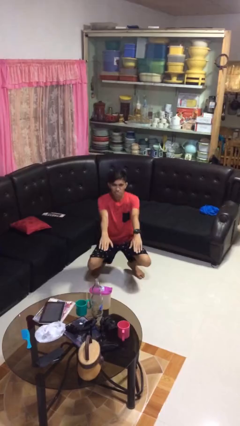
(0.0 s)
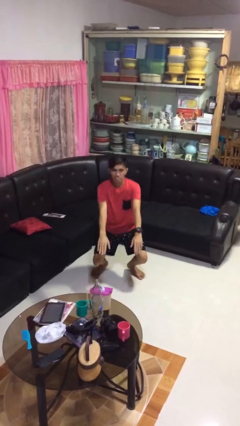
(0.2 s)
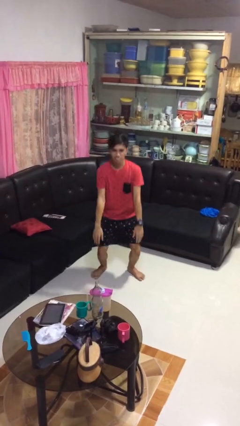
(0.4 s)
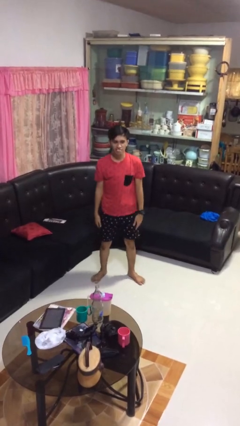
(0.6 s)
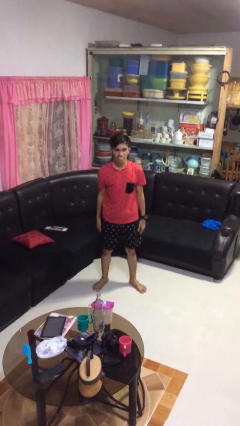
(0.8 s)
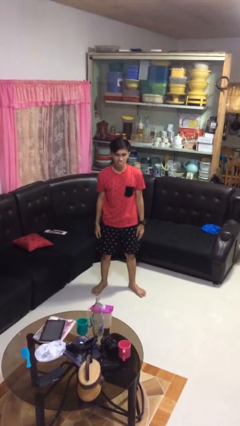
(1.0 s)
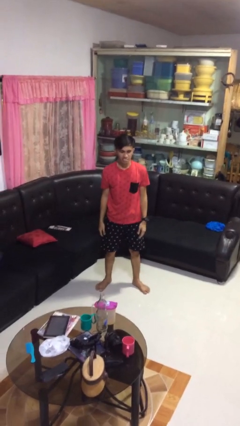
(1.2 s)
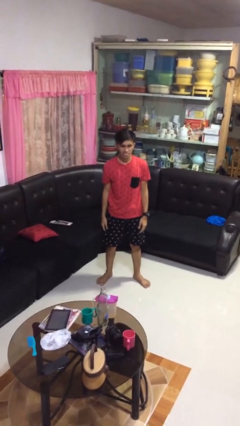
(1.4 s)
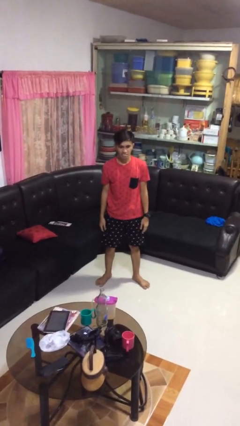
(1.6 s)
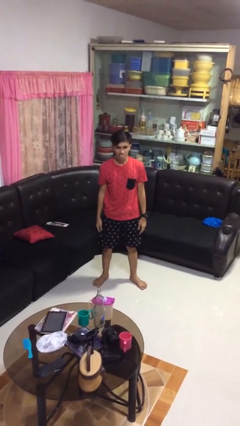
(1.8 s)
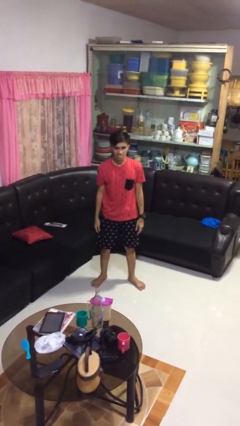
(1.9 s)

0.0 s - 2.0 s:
person stands up

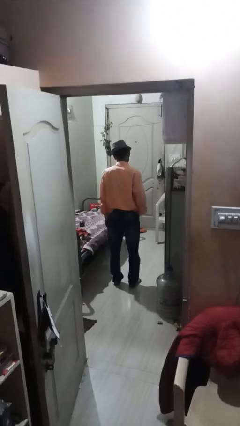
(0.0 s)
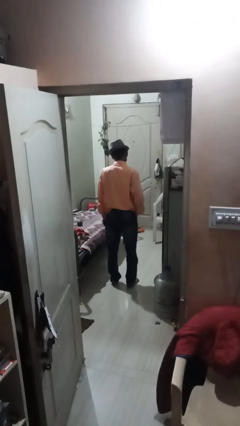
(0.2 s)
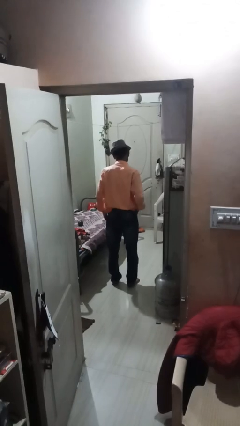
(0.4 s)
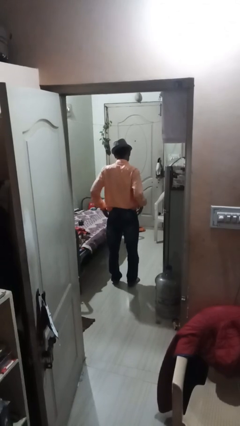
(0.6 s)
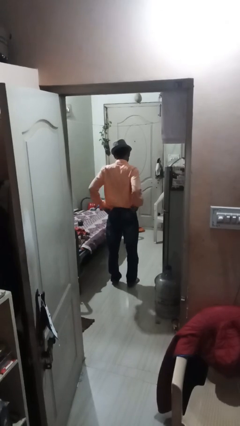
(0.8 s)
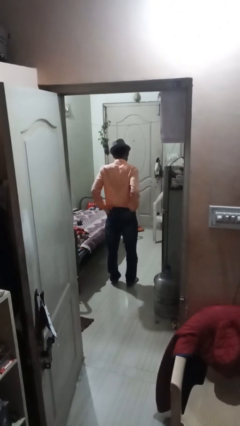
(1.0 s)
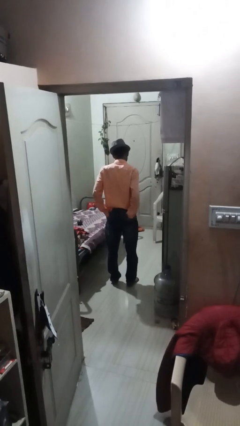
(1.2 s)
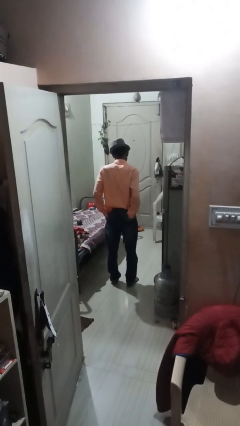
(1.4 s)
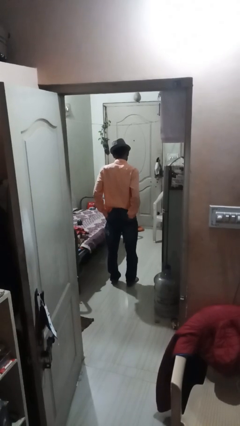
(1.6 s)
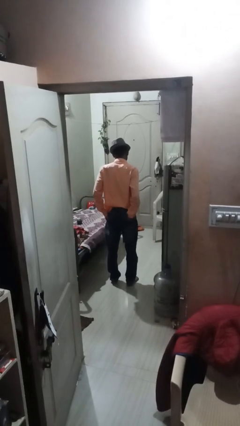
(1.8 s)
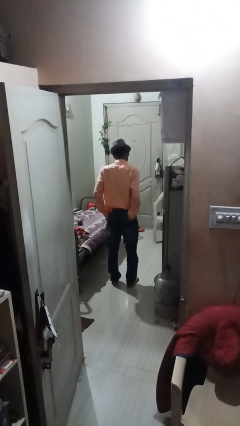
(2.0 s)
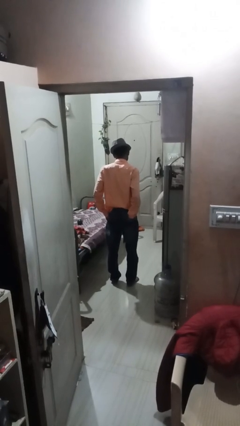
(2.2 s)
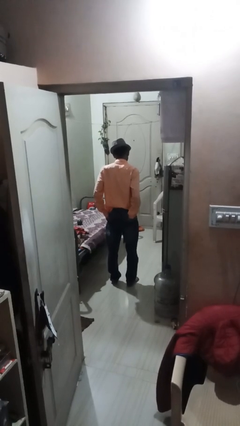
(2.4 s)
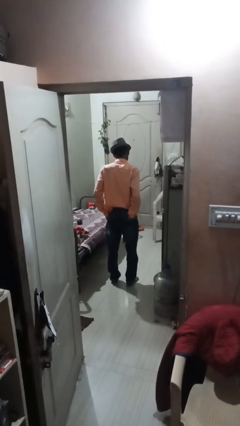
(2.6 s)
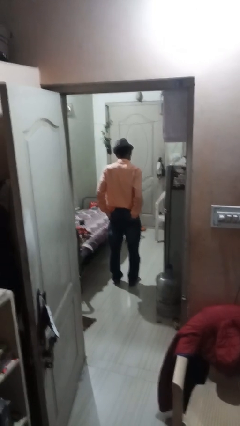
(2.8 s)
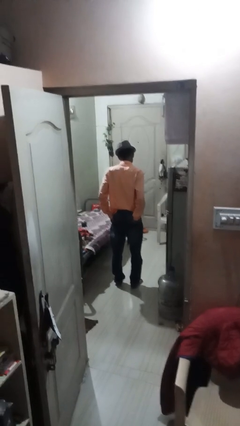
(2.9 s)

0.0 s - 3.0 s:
person puts hands in back pockets

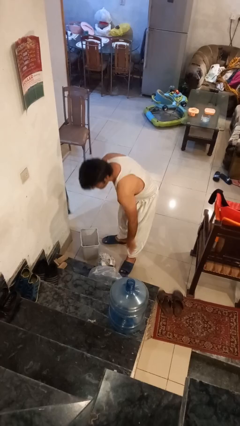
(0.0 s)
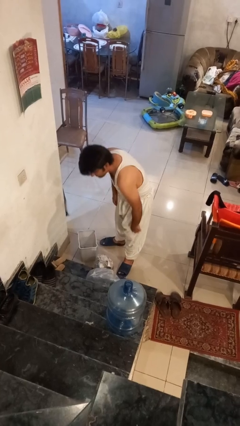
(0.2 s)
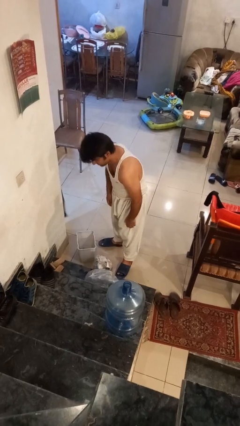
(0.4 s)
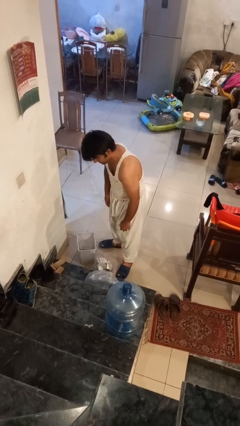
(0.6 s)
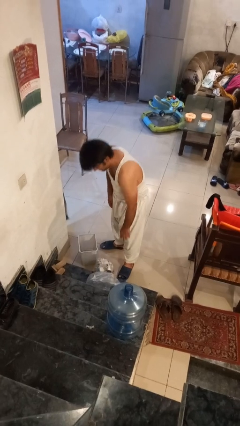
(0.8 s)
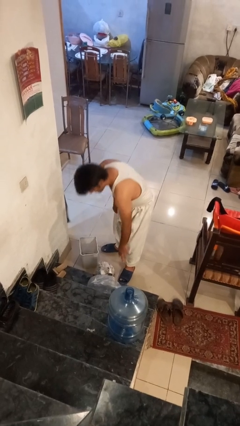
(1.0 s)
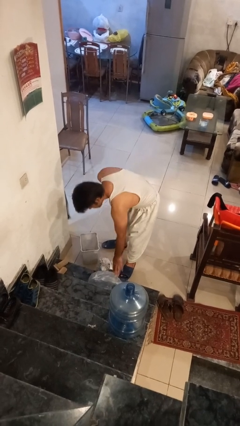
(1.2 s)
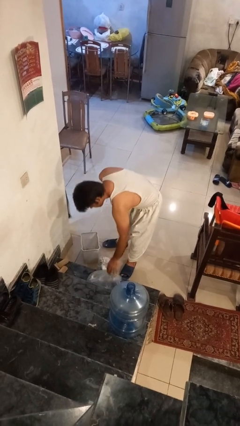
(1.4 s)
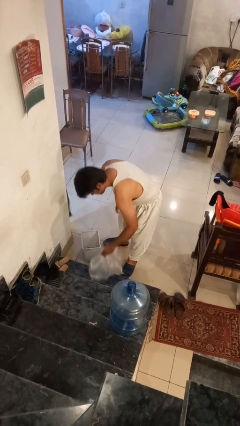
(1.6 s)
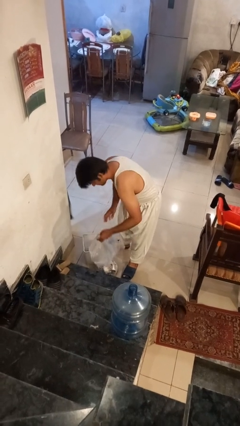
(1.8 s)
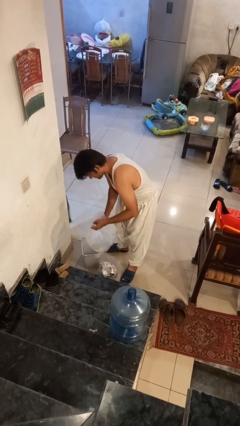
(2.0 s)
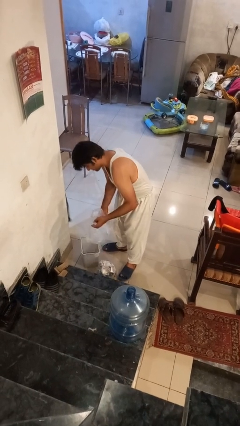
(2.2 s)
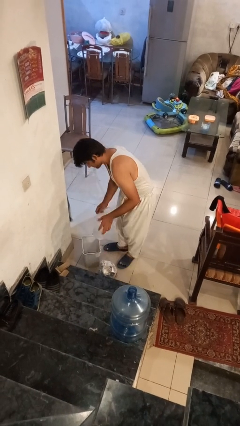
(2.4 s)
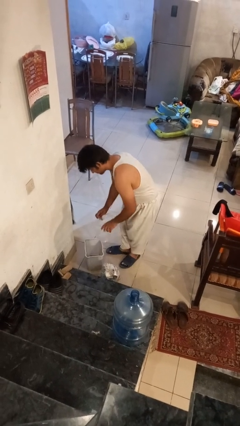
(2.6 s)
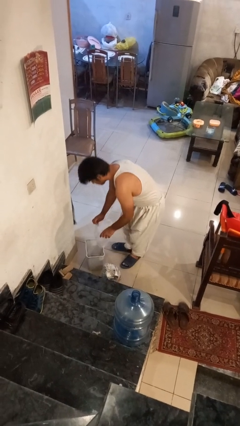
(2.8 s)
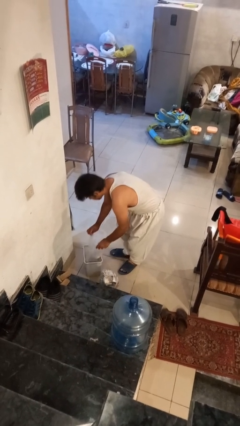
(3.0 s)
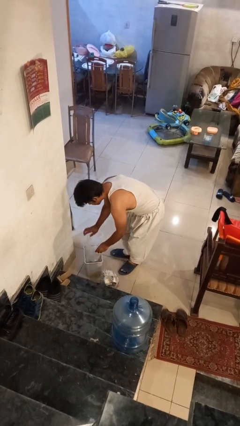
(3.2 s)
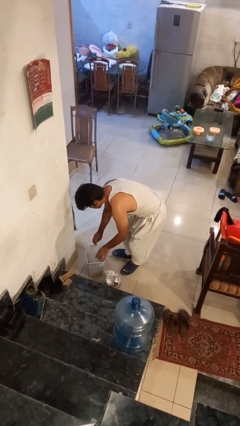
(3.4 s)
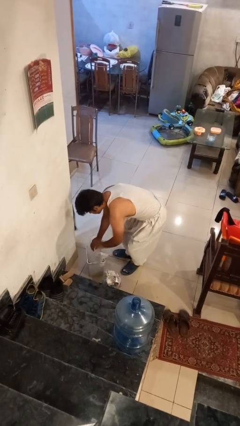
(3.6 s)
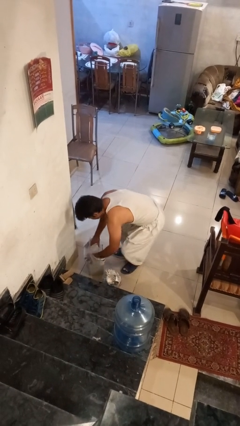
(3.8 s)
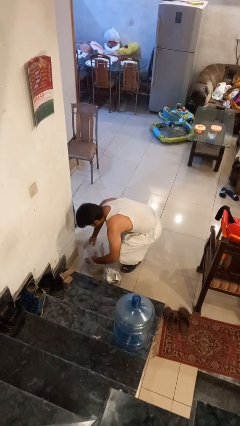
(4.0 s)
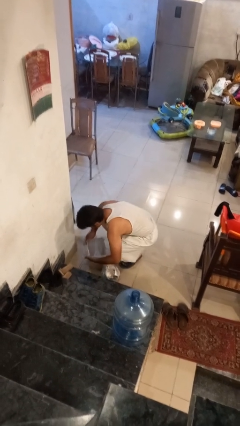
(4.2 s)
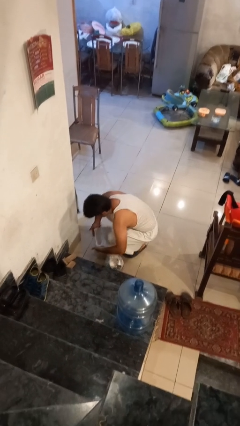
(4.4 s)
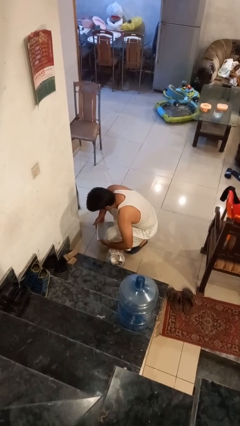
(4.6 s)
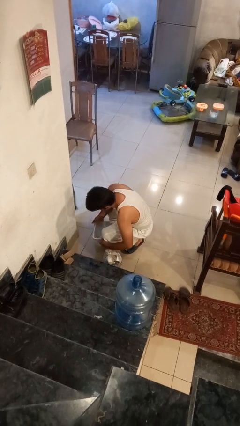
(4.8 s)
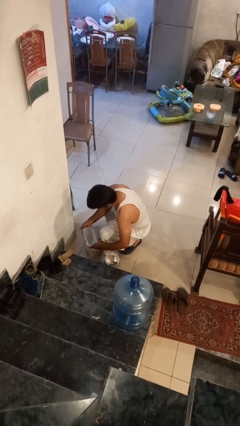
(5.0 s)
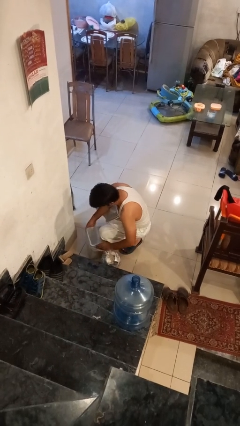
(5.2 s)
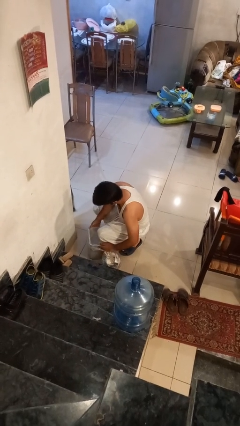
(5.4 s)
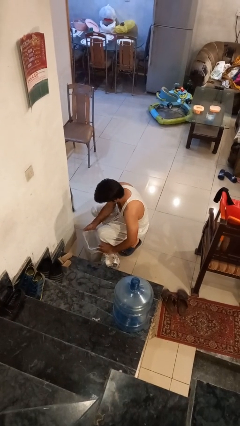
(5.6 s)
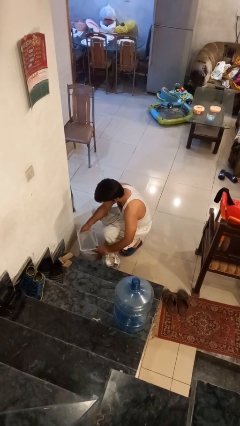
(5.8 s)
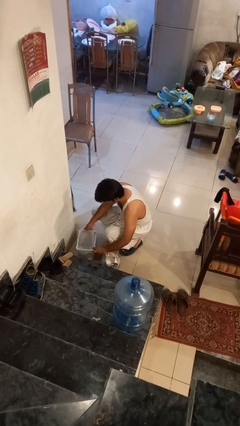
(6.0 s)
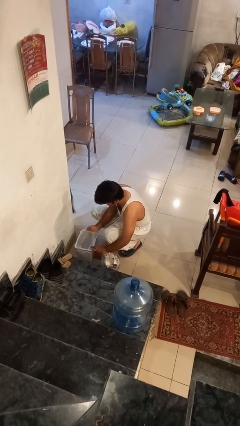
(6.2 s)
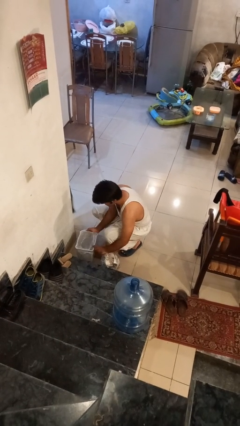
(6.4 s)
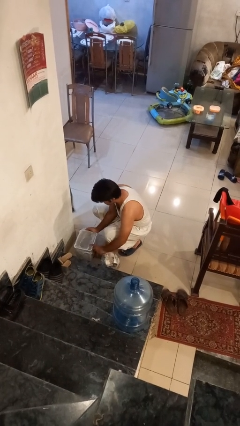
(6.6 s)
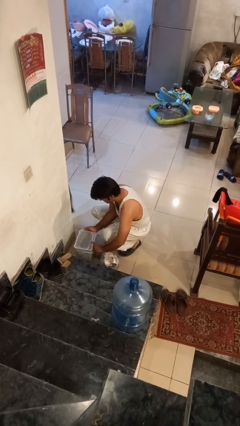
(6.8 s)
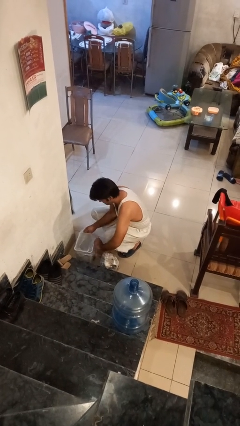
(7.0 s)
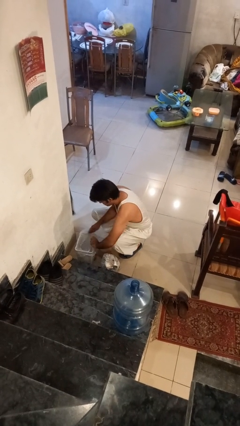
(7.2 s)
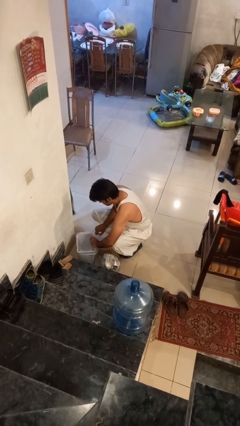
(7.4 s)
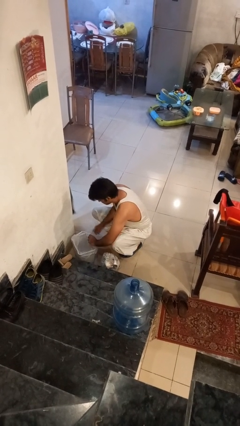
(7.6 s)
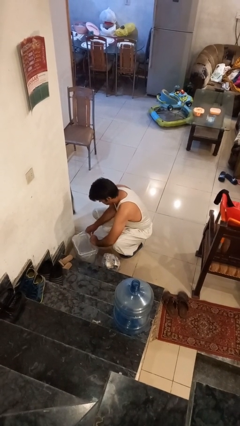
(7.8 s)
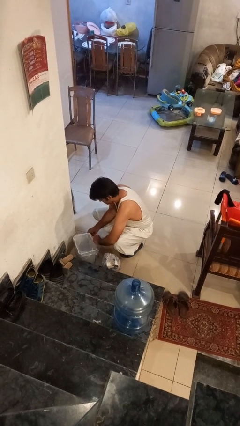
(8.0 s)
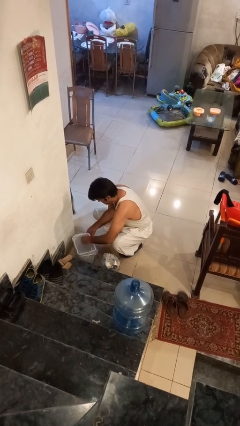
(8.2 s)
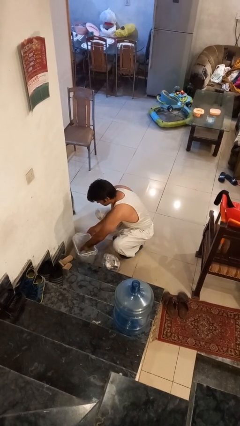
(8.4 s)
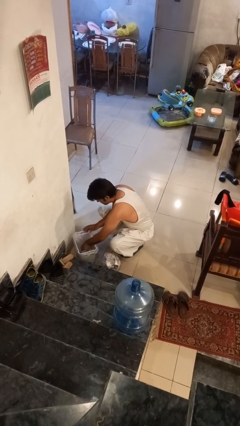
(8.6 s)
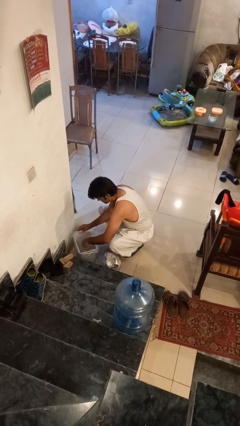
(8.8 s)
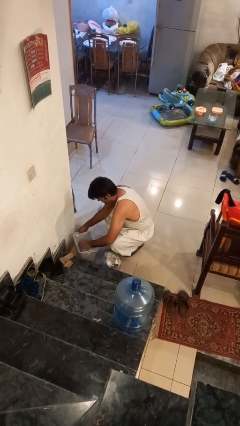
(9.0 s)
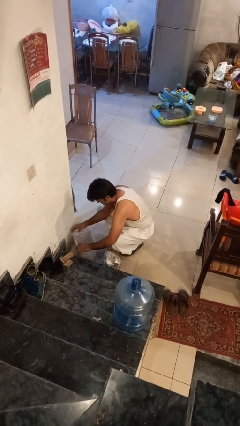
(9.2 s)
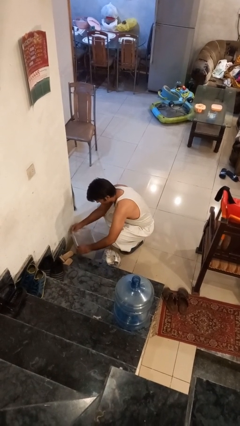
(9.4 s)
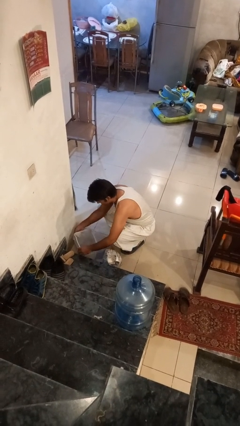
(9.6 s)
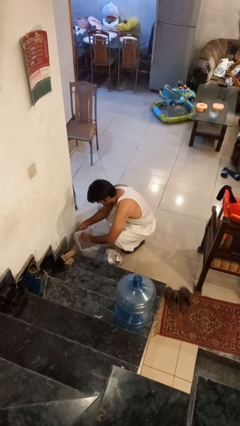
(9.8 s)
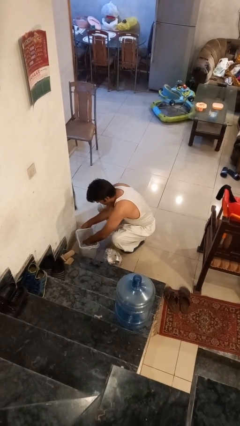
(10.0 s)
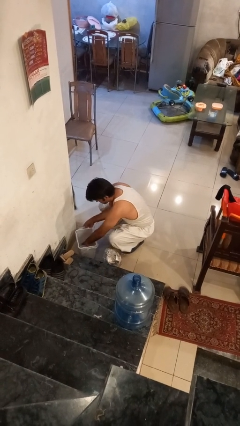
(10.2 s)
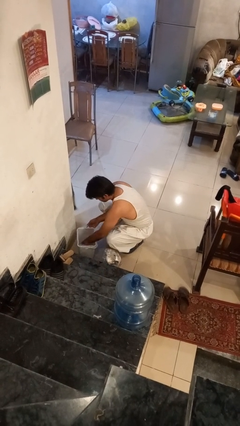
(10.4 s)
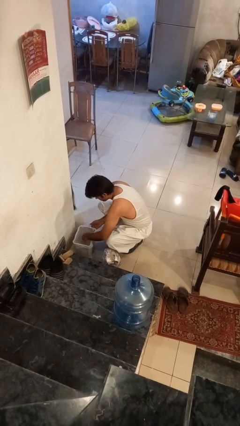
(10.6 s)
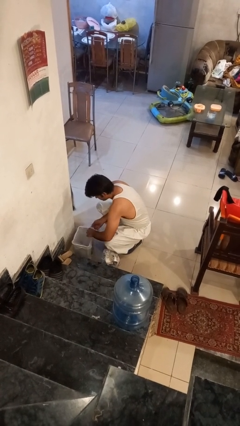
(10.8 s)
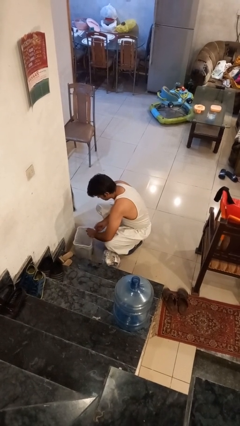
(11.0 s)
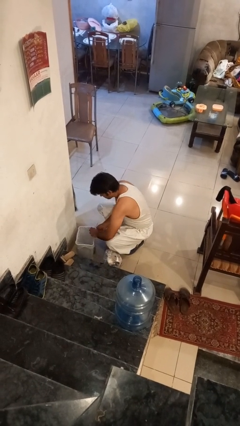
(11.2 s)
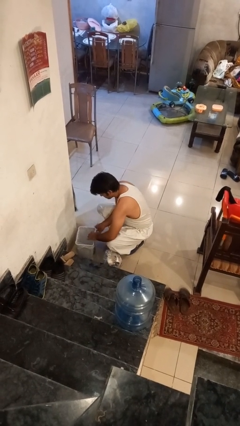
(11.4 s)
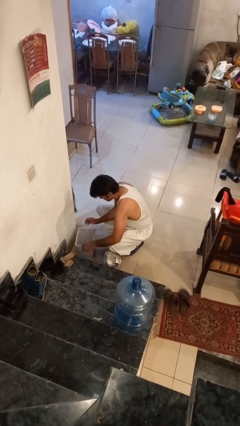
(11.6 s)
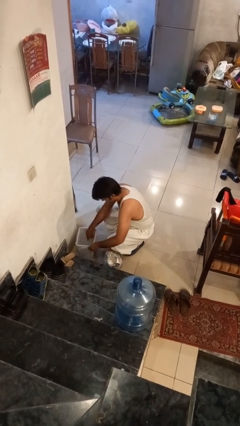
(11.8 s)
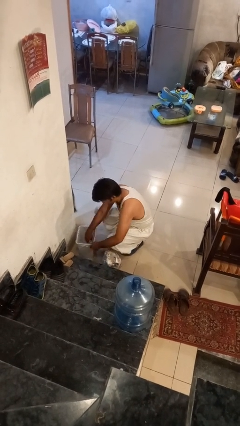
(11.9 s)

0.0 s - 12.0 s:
person inserts trashbag into trashcan

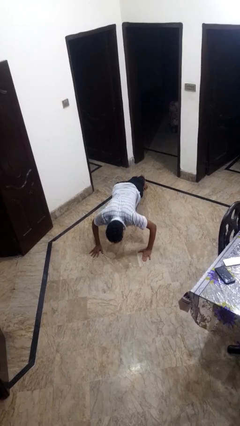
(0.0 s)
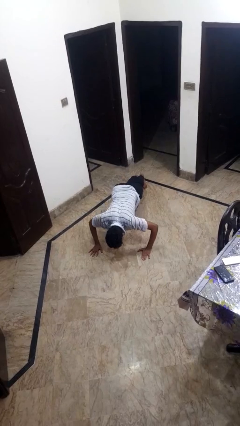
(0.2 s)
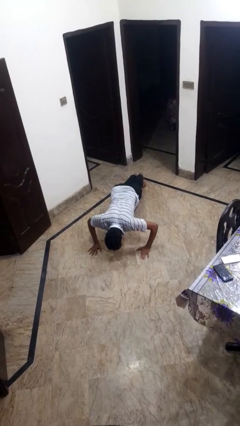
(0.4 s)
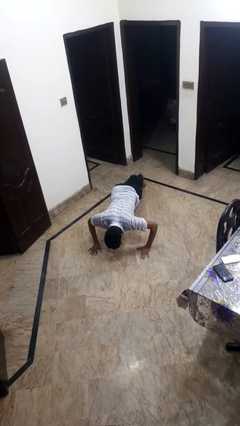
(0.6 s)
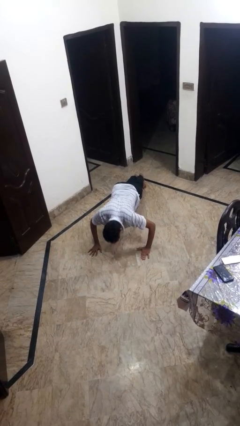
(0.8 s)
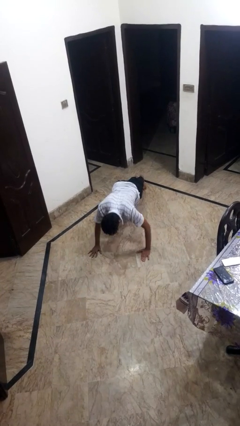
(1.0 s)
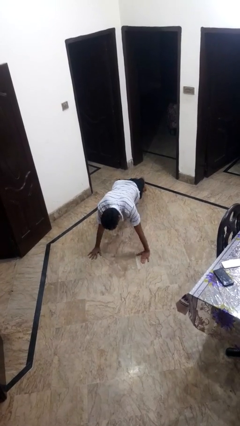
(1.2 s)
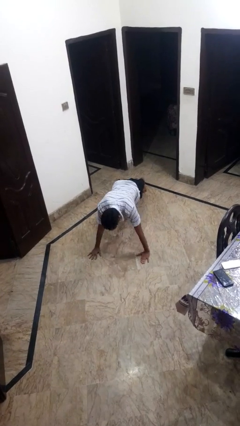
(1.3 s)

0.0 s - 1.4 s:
person exercises with pushup
